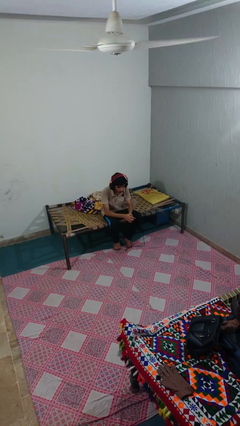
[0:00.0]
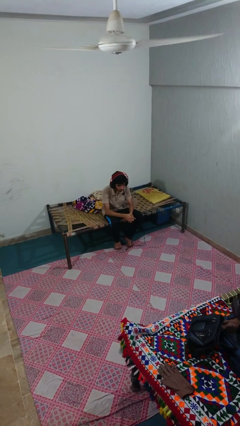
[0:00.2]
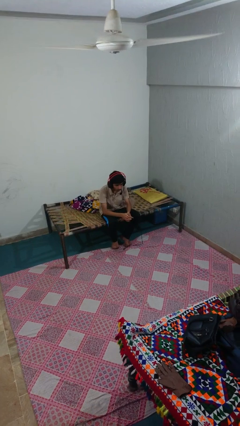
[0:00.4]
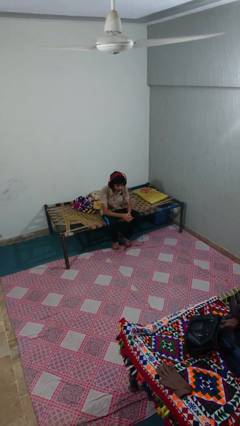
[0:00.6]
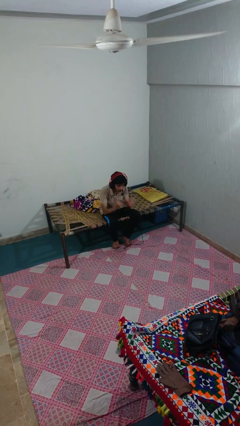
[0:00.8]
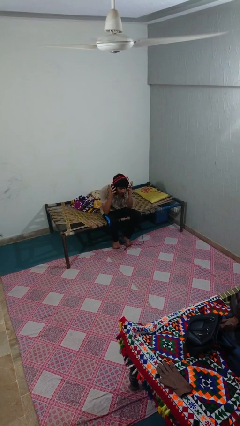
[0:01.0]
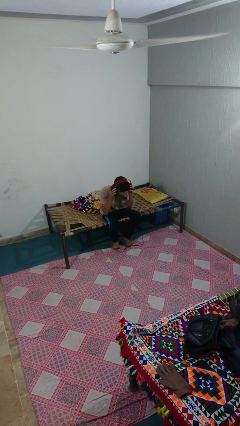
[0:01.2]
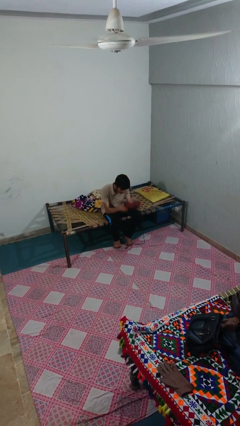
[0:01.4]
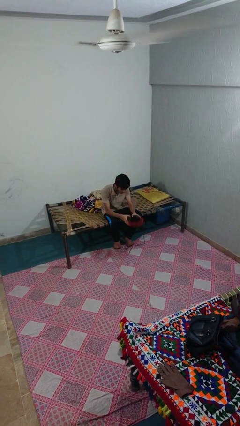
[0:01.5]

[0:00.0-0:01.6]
person takes off headphones

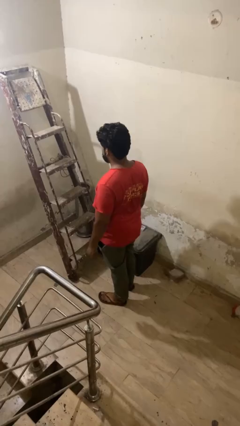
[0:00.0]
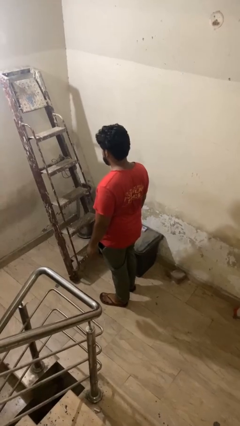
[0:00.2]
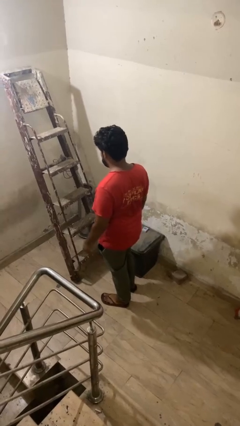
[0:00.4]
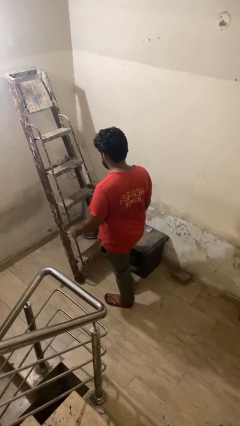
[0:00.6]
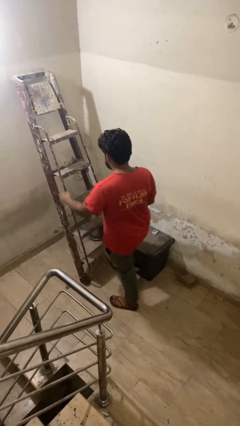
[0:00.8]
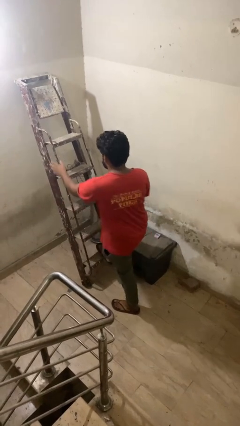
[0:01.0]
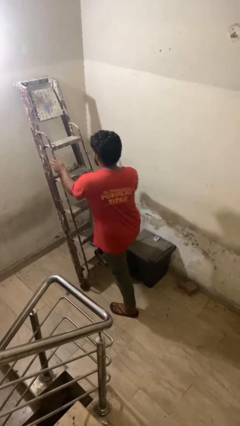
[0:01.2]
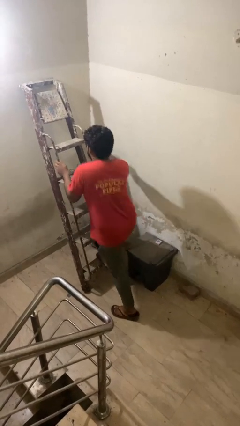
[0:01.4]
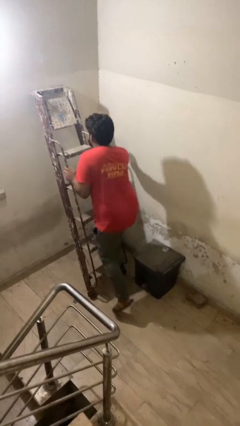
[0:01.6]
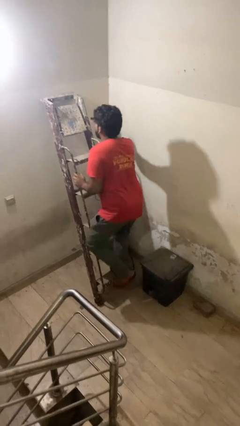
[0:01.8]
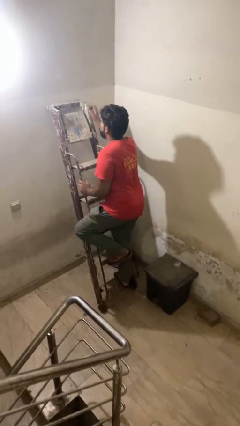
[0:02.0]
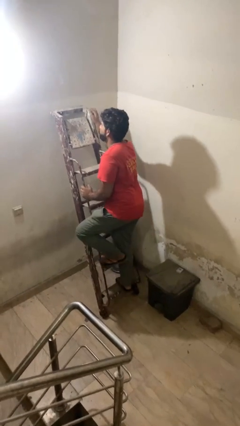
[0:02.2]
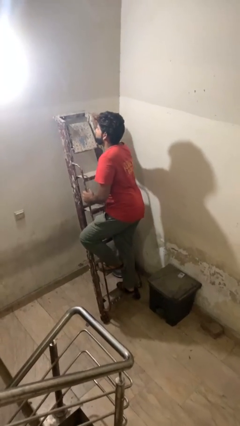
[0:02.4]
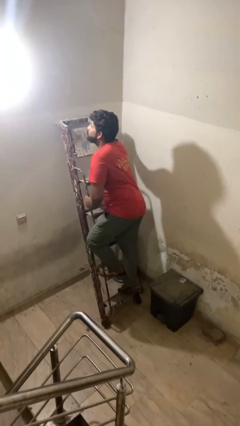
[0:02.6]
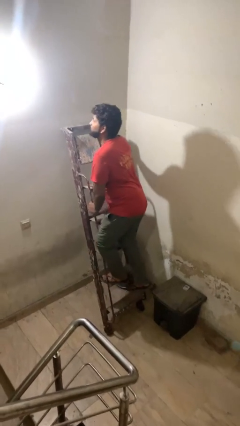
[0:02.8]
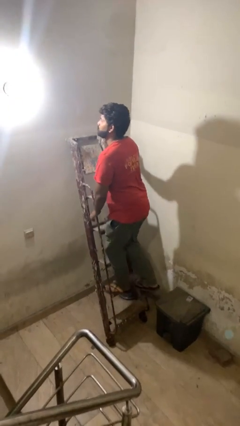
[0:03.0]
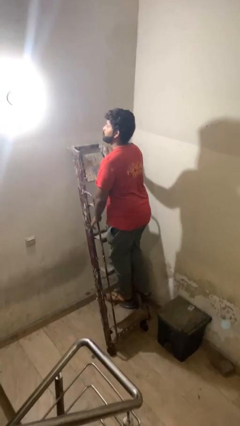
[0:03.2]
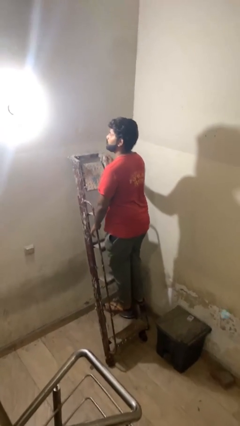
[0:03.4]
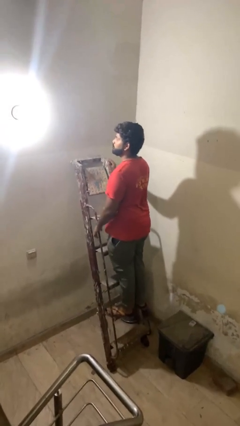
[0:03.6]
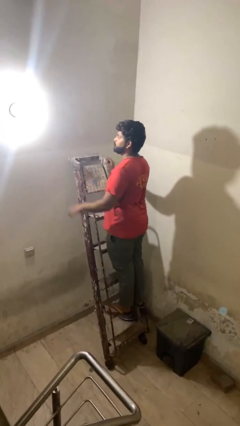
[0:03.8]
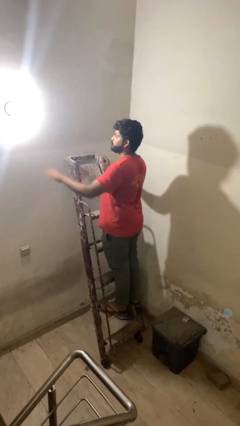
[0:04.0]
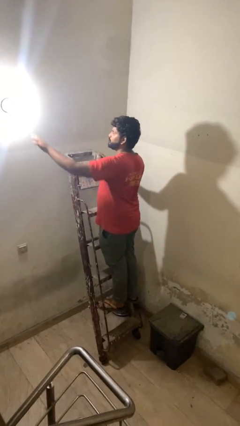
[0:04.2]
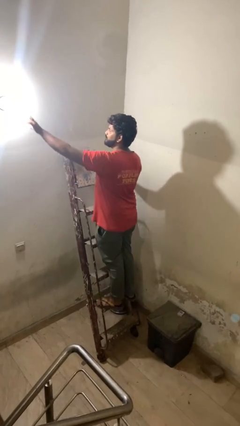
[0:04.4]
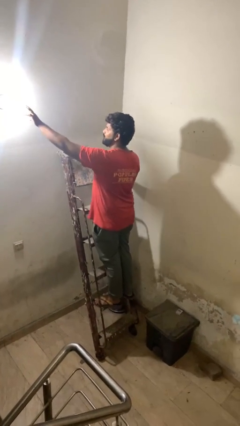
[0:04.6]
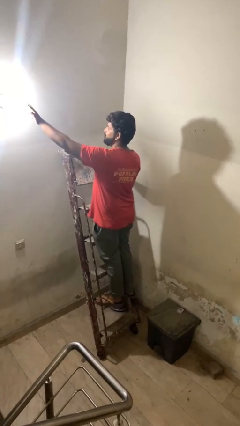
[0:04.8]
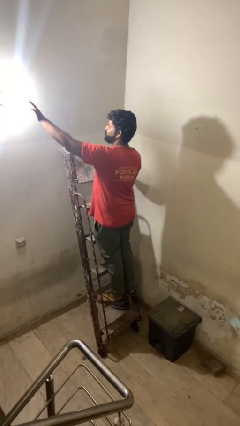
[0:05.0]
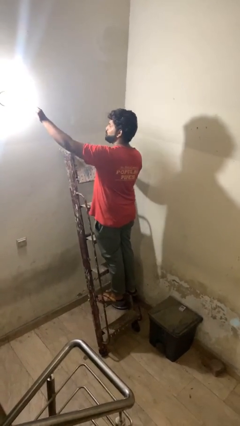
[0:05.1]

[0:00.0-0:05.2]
person climbs up ladder

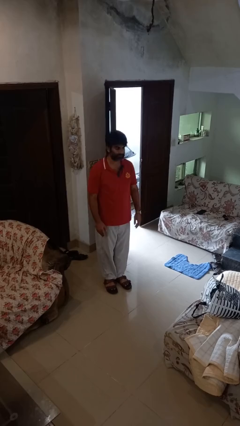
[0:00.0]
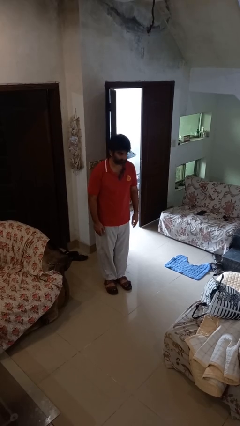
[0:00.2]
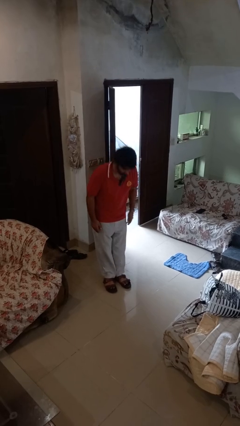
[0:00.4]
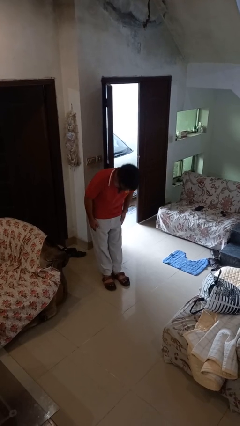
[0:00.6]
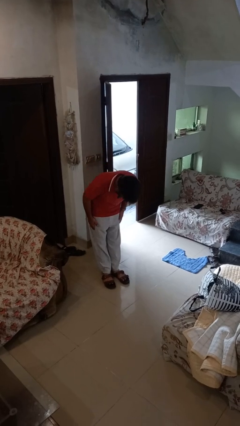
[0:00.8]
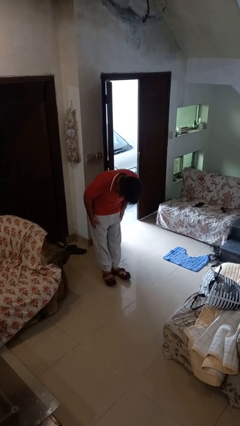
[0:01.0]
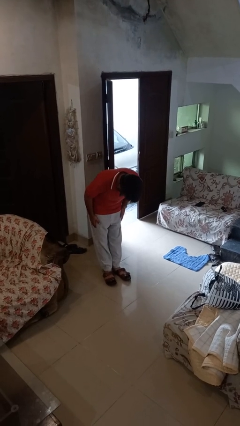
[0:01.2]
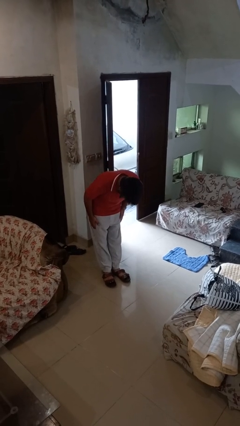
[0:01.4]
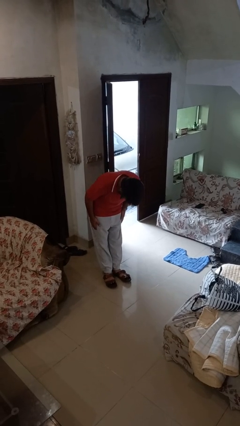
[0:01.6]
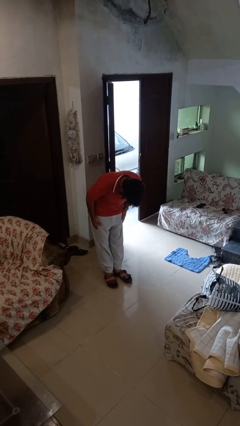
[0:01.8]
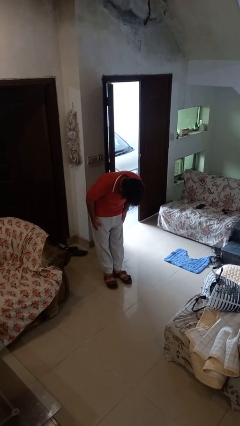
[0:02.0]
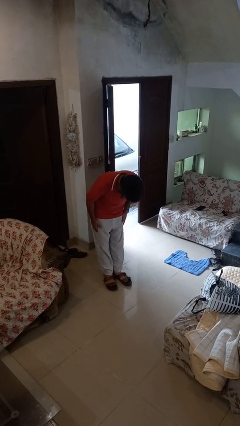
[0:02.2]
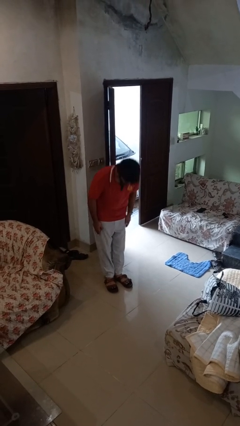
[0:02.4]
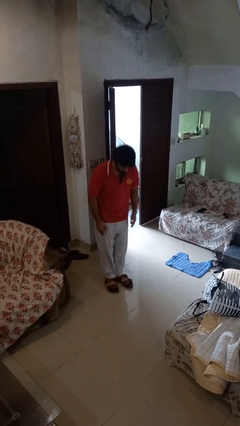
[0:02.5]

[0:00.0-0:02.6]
person bows

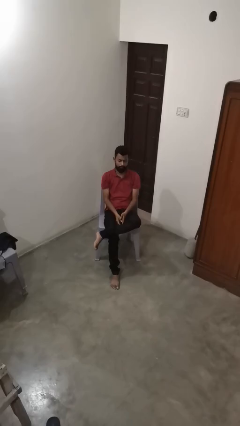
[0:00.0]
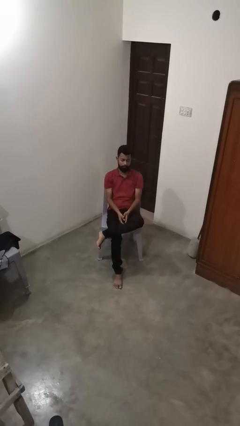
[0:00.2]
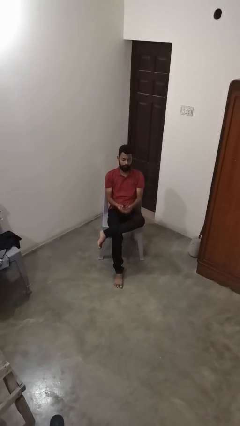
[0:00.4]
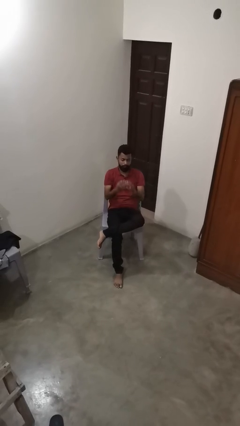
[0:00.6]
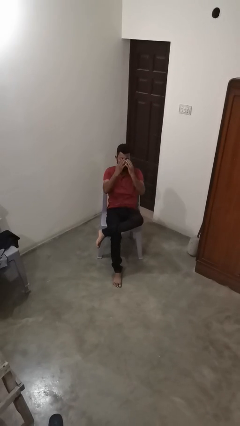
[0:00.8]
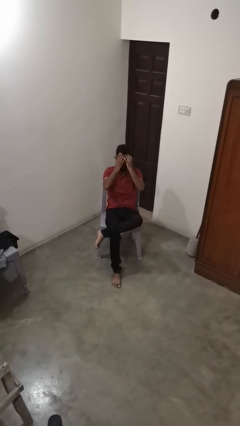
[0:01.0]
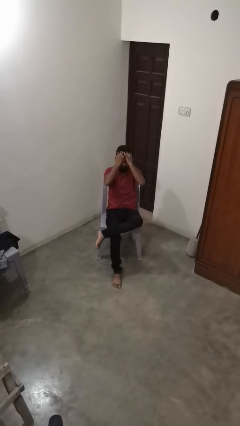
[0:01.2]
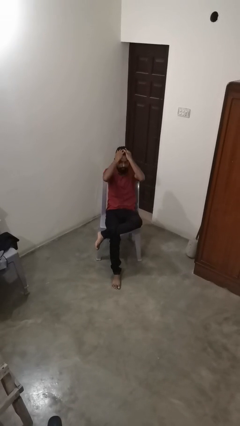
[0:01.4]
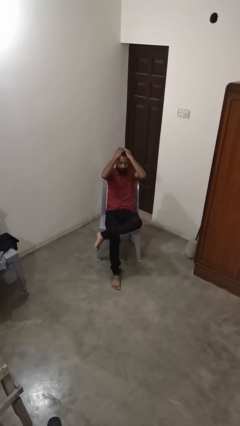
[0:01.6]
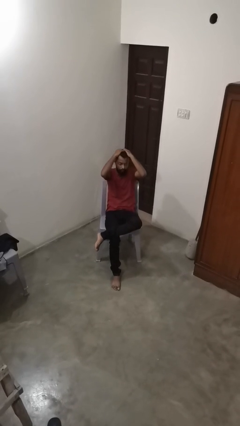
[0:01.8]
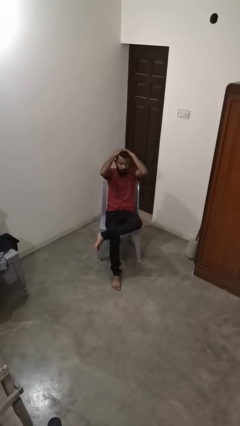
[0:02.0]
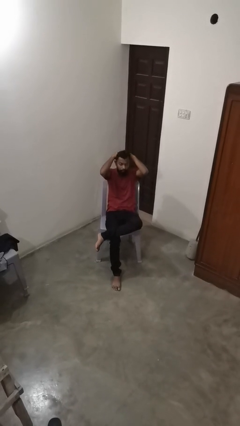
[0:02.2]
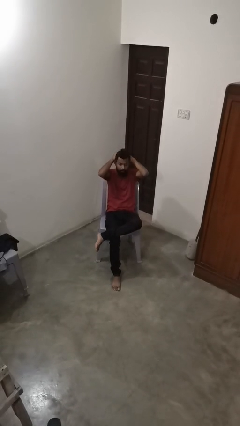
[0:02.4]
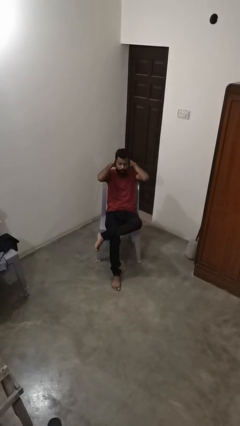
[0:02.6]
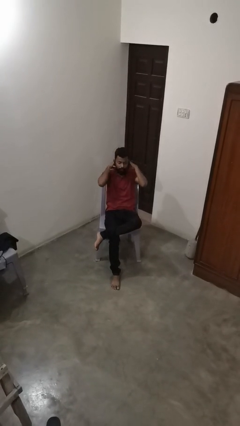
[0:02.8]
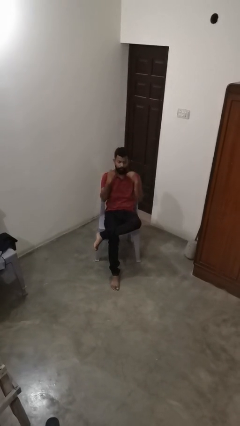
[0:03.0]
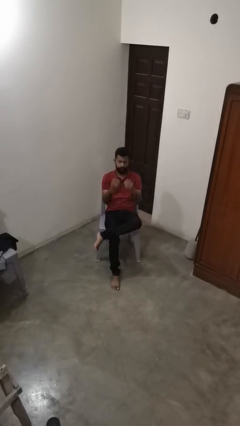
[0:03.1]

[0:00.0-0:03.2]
person strokes hair

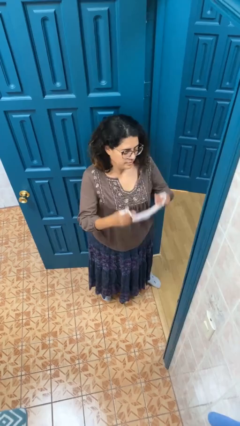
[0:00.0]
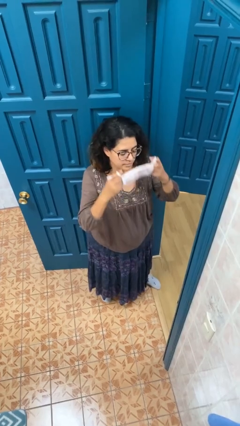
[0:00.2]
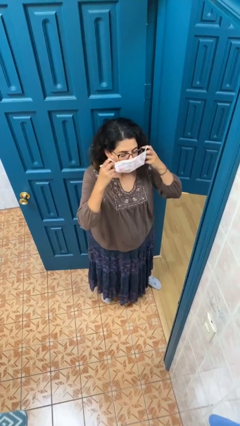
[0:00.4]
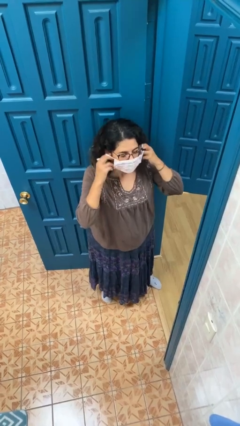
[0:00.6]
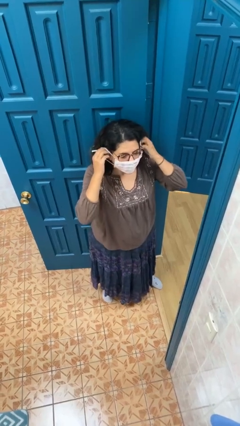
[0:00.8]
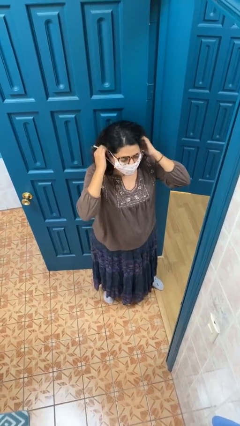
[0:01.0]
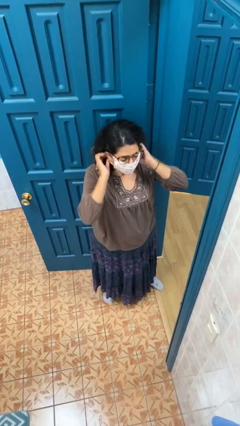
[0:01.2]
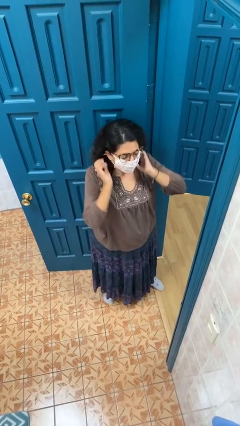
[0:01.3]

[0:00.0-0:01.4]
person puts on facemask

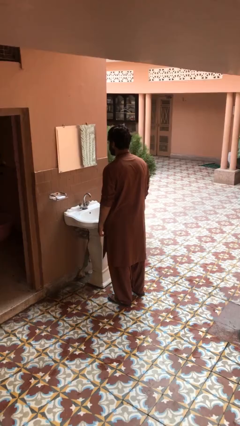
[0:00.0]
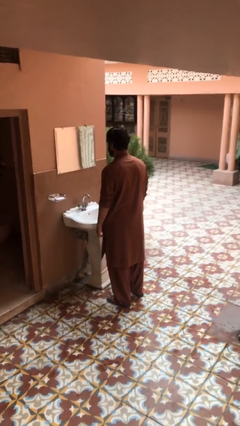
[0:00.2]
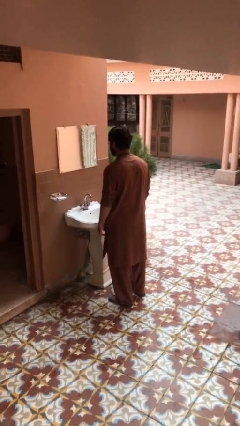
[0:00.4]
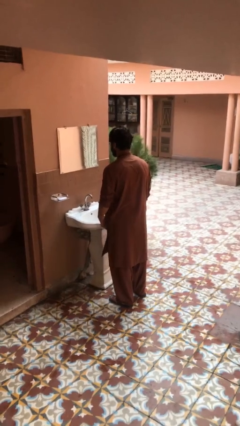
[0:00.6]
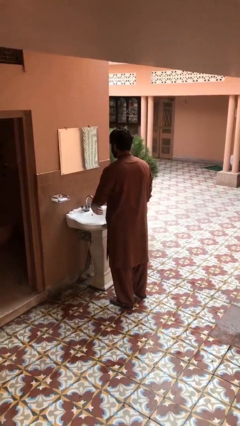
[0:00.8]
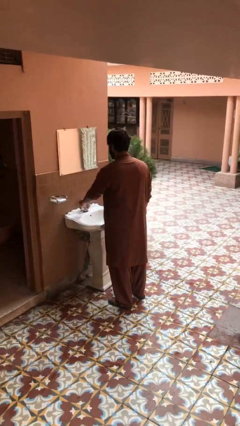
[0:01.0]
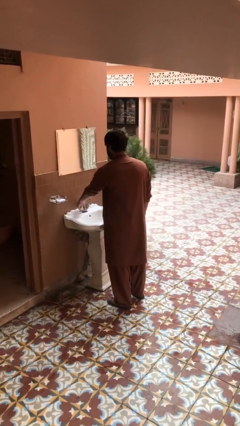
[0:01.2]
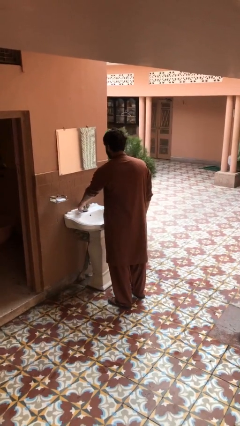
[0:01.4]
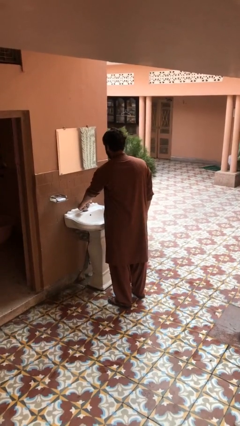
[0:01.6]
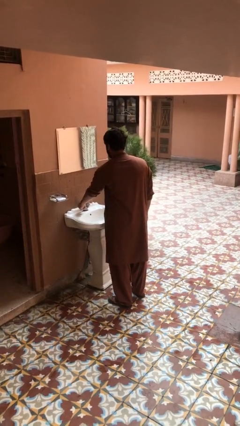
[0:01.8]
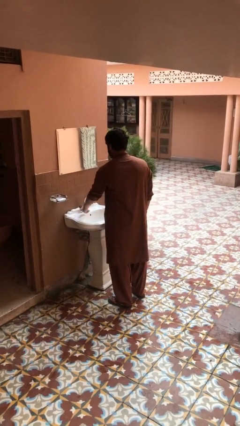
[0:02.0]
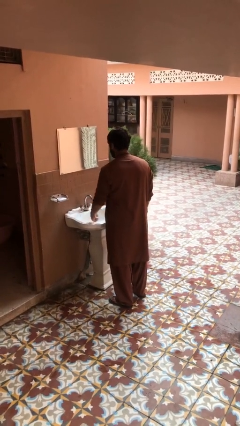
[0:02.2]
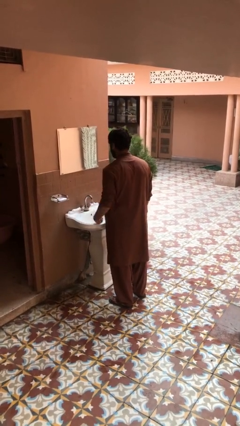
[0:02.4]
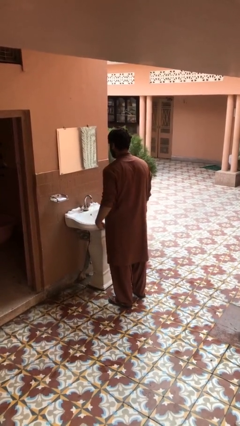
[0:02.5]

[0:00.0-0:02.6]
person turns on faucet

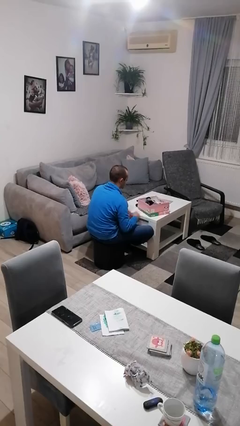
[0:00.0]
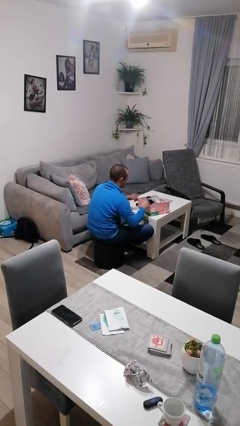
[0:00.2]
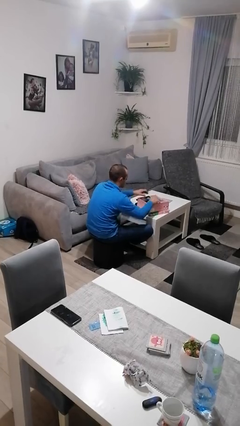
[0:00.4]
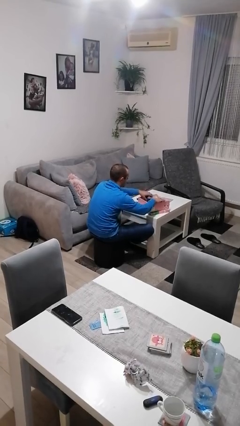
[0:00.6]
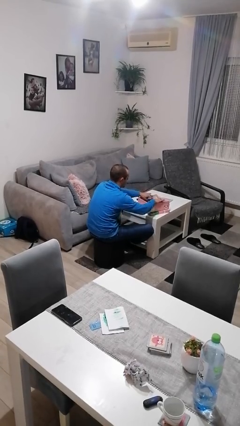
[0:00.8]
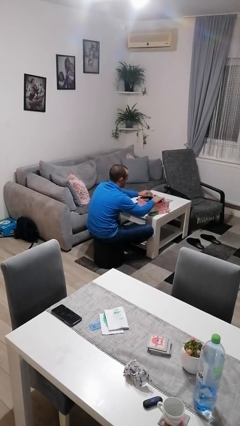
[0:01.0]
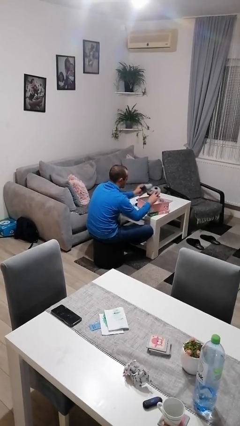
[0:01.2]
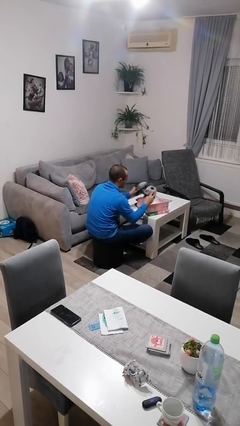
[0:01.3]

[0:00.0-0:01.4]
person takes object from box
